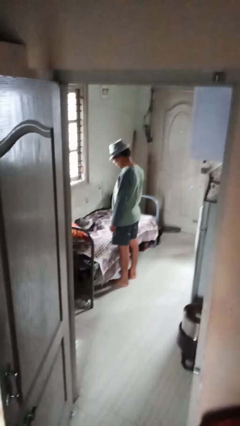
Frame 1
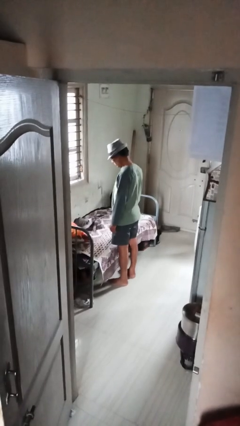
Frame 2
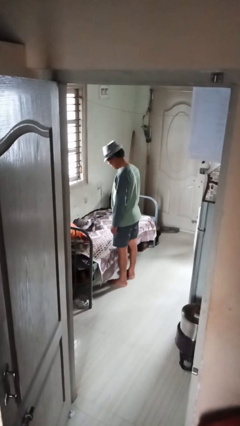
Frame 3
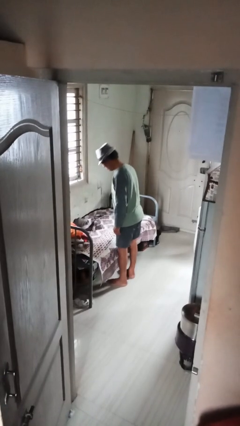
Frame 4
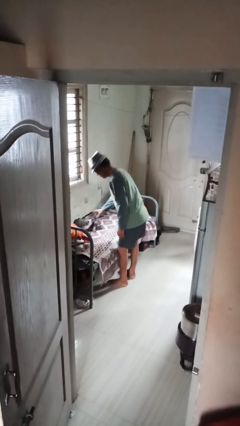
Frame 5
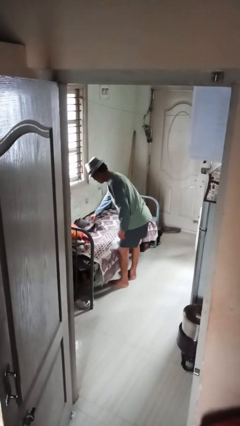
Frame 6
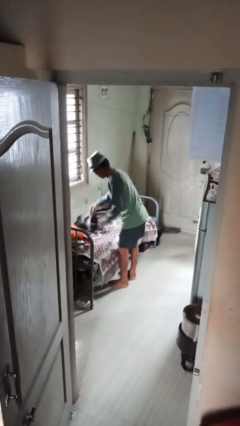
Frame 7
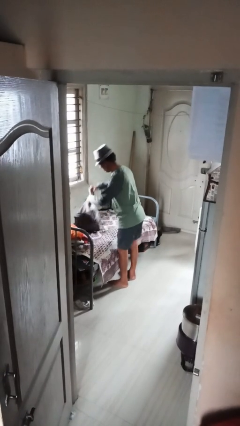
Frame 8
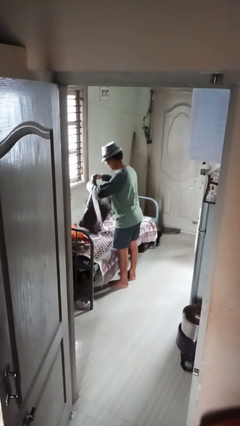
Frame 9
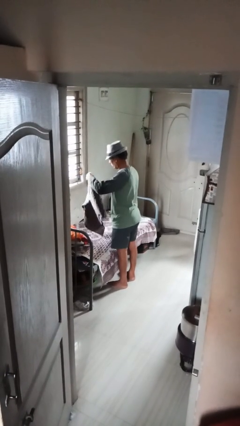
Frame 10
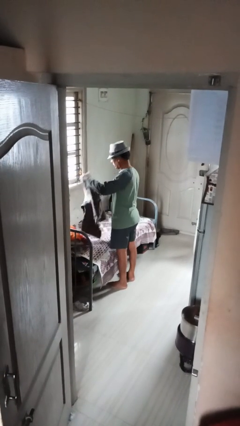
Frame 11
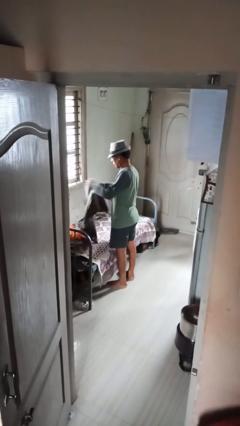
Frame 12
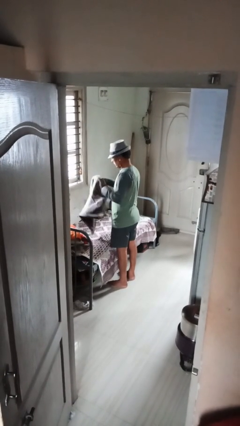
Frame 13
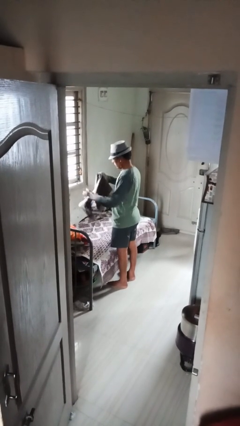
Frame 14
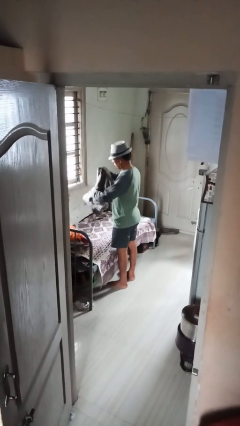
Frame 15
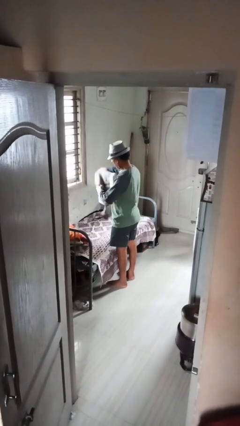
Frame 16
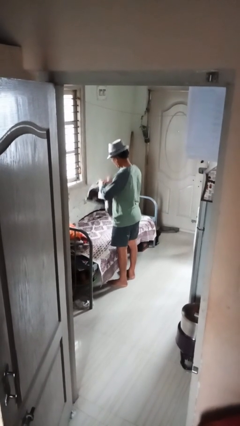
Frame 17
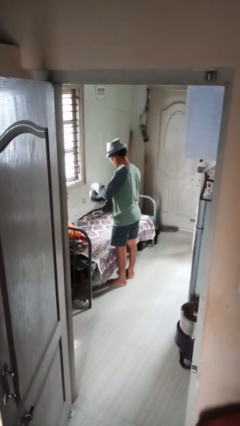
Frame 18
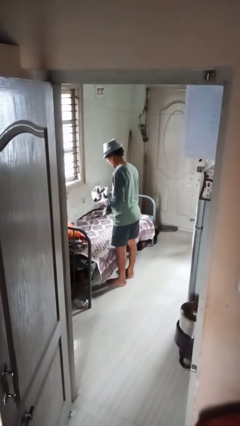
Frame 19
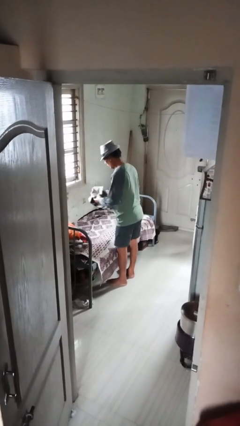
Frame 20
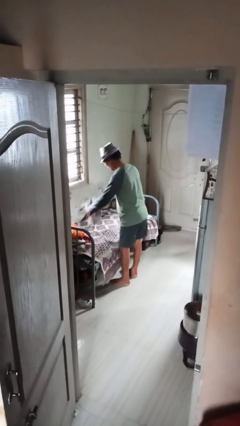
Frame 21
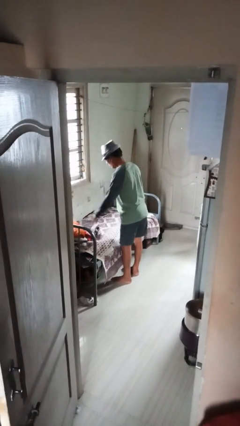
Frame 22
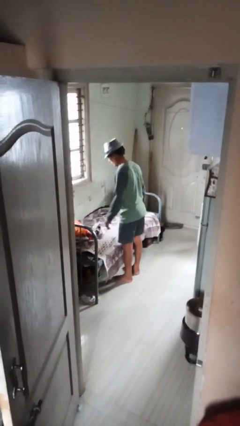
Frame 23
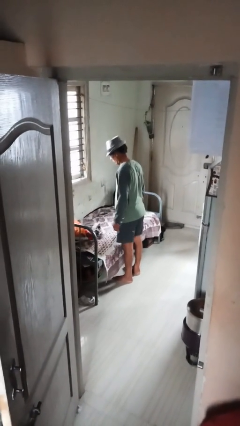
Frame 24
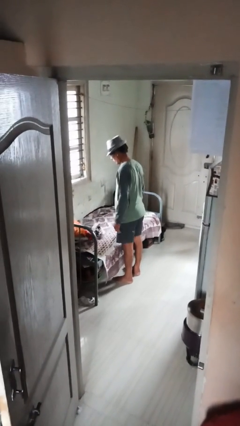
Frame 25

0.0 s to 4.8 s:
person folds pants

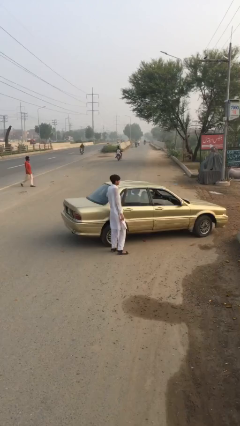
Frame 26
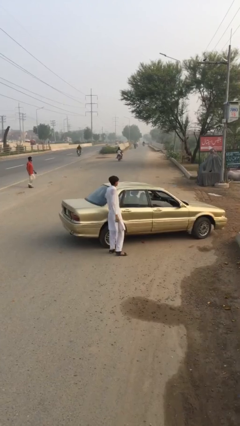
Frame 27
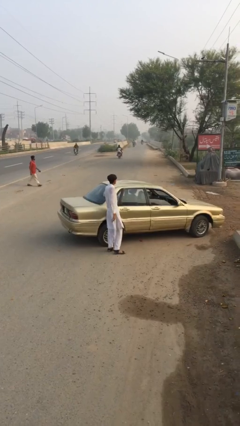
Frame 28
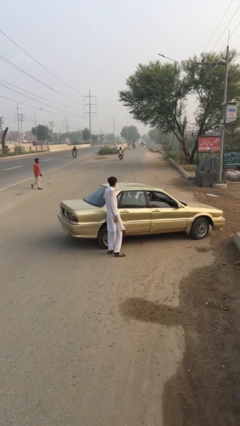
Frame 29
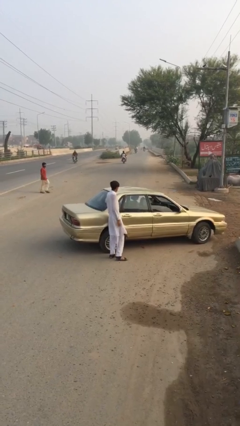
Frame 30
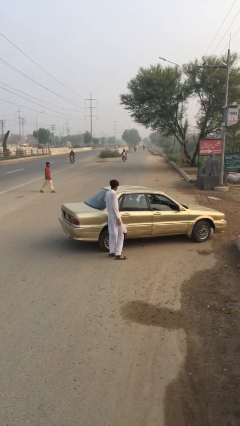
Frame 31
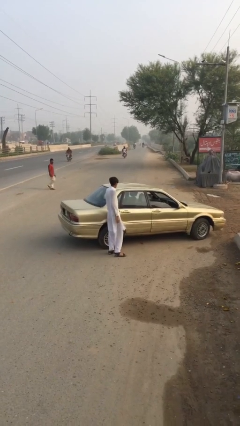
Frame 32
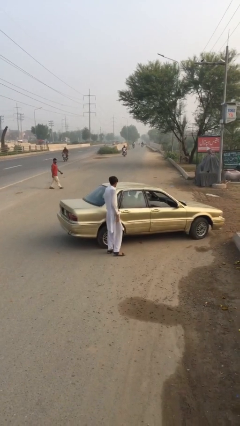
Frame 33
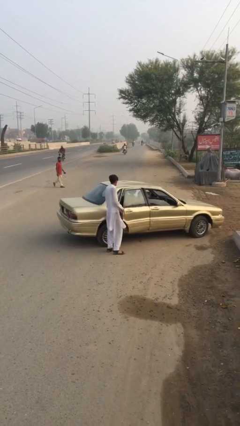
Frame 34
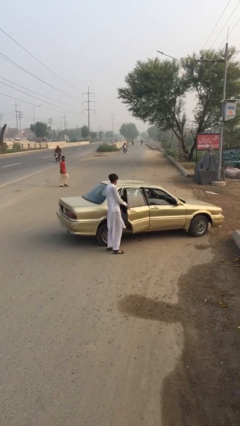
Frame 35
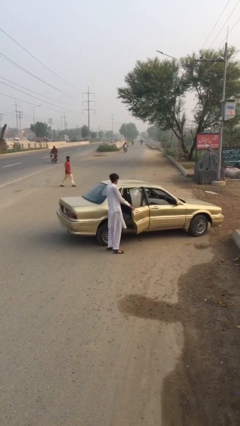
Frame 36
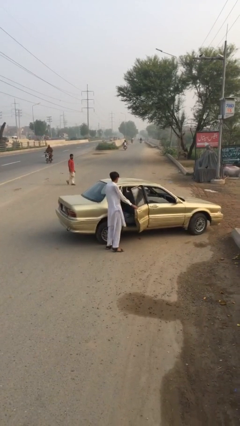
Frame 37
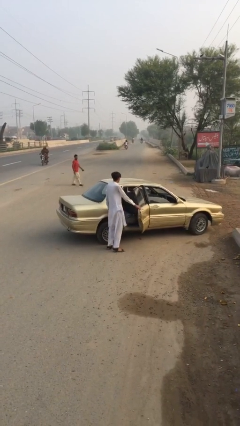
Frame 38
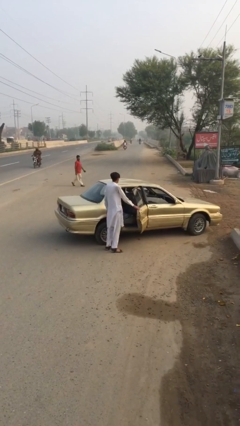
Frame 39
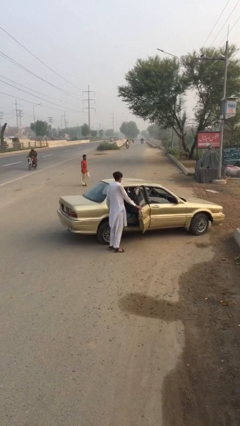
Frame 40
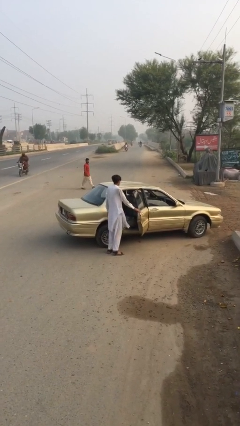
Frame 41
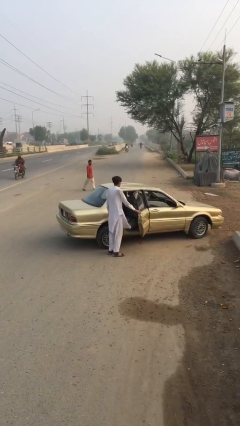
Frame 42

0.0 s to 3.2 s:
person opens car door

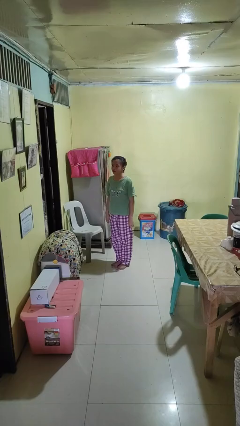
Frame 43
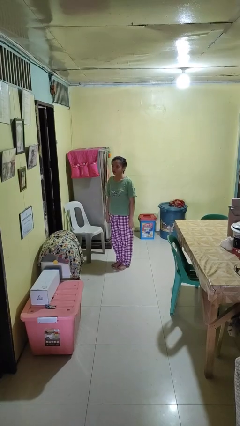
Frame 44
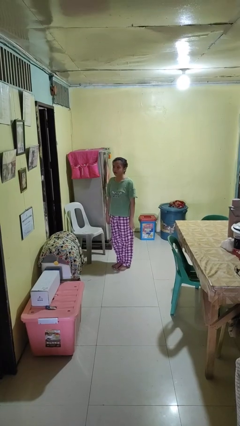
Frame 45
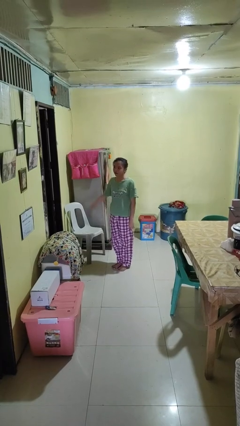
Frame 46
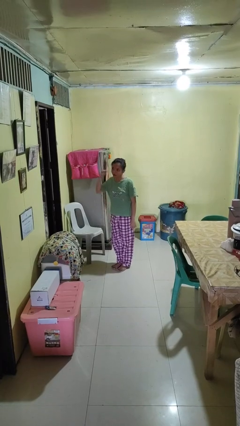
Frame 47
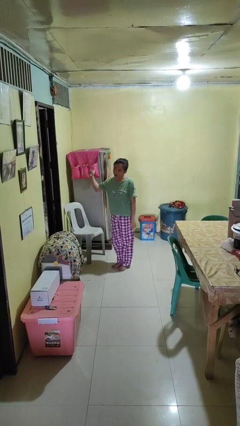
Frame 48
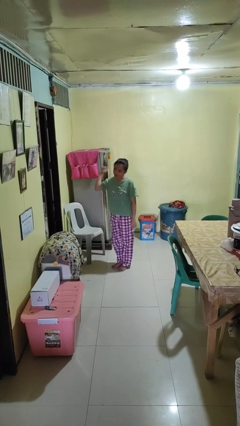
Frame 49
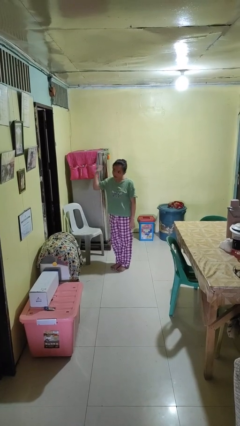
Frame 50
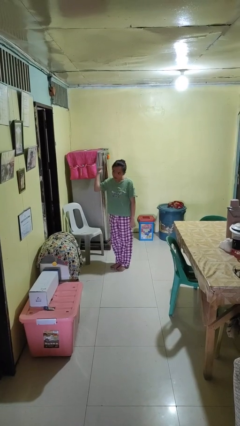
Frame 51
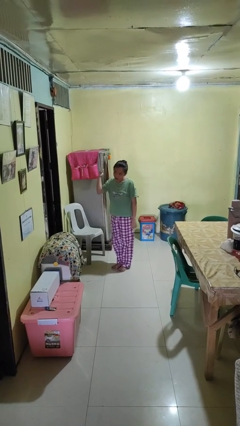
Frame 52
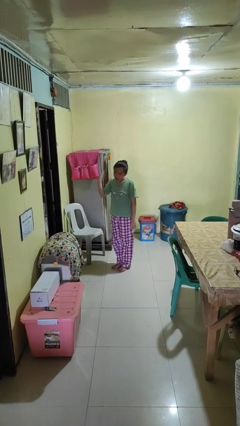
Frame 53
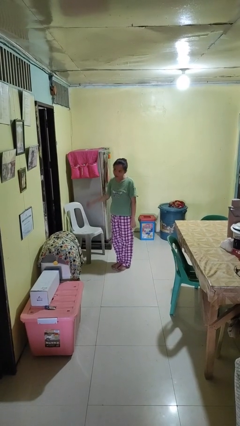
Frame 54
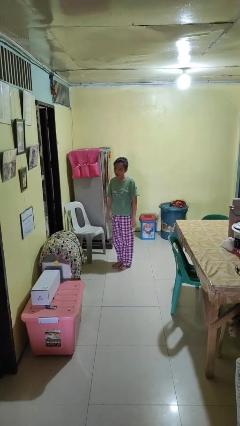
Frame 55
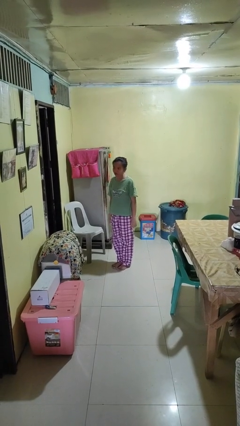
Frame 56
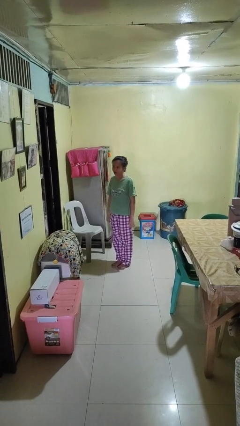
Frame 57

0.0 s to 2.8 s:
person gestures behind me

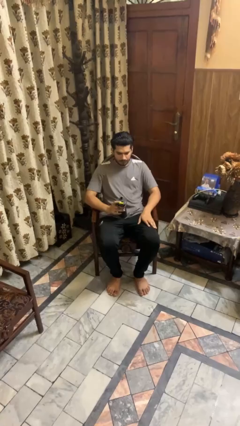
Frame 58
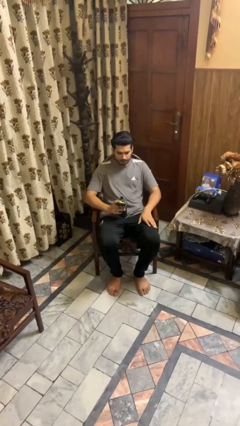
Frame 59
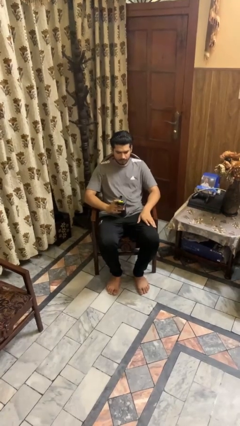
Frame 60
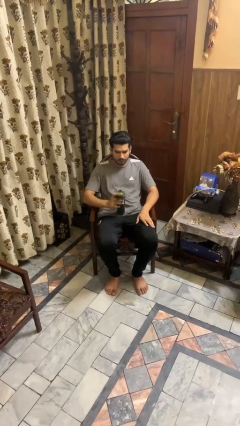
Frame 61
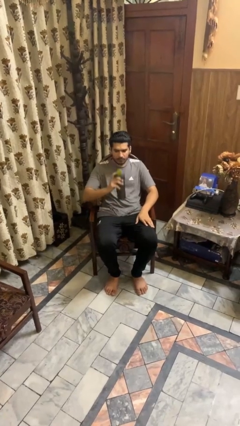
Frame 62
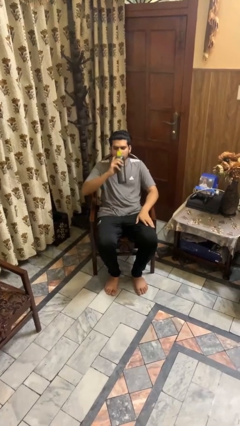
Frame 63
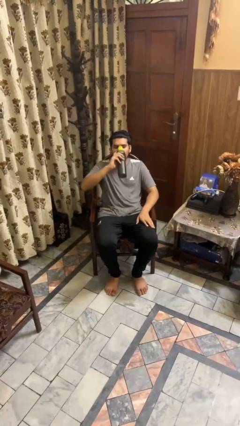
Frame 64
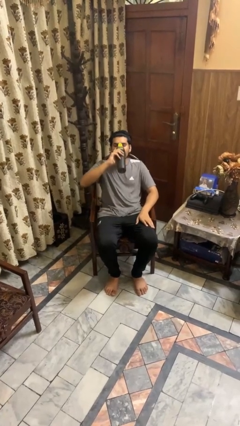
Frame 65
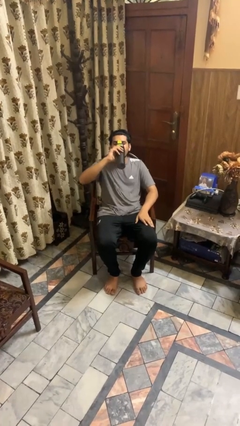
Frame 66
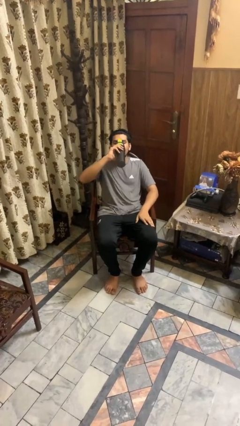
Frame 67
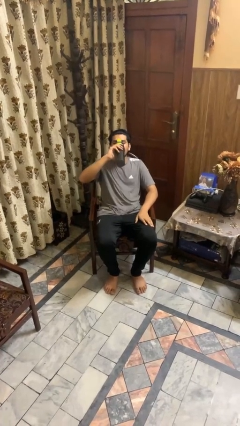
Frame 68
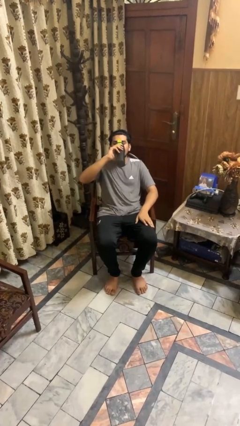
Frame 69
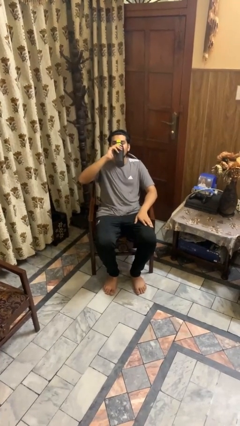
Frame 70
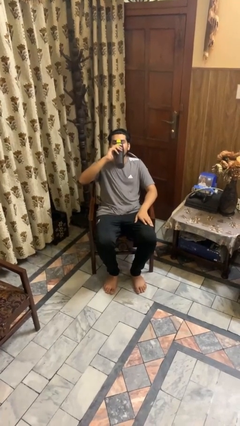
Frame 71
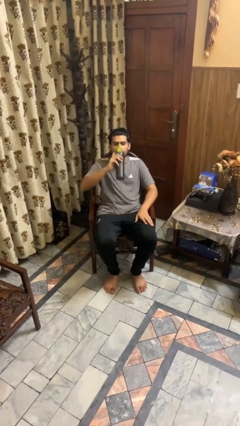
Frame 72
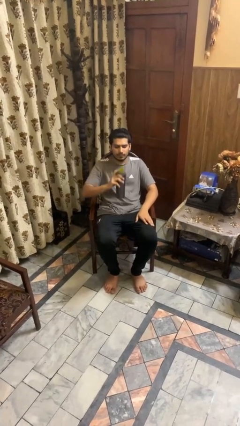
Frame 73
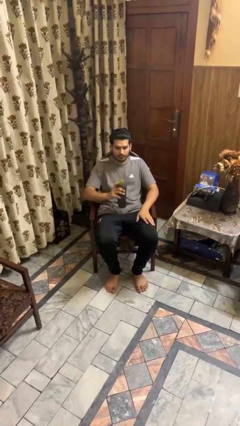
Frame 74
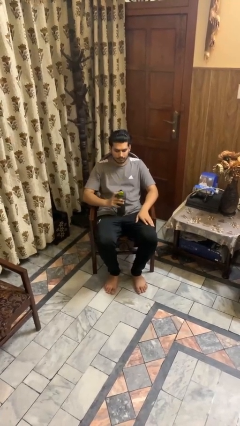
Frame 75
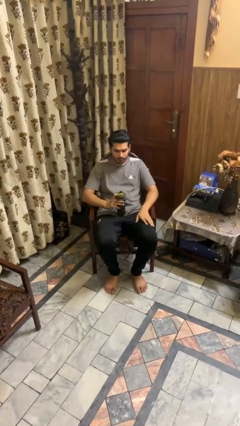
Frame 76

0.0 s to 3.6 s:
person drinks from bottle

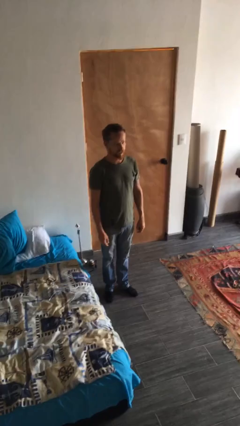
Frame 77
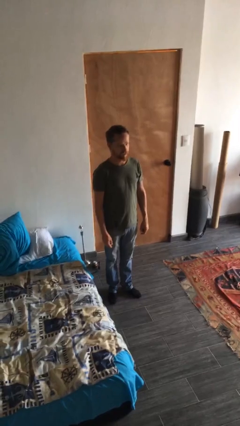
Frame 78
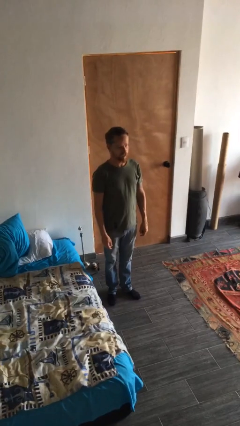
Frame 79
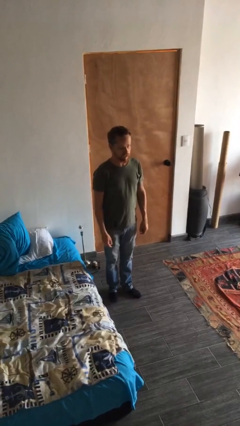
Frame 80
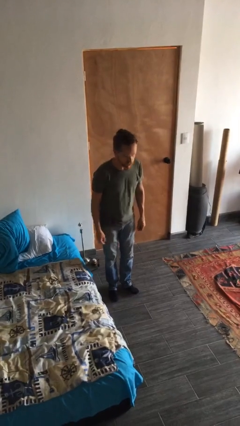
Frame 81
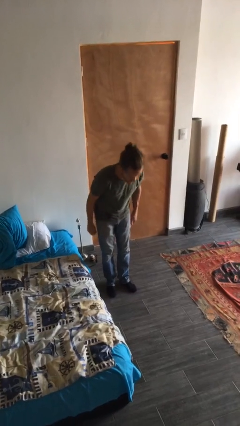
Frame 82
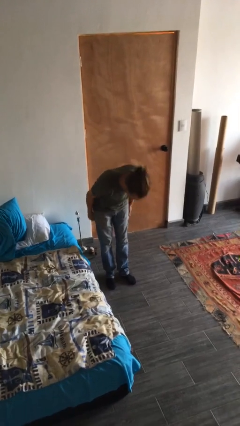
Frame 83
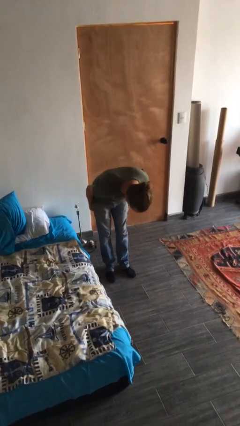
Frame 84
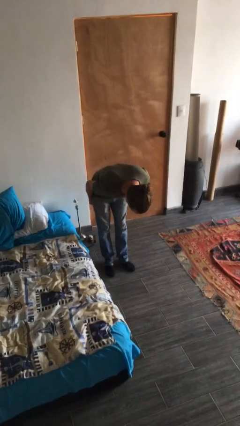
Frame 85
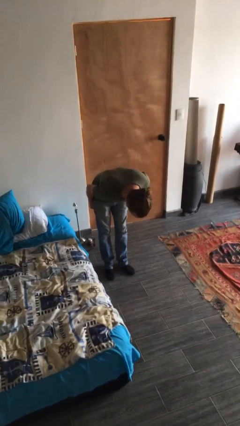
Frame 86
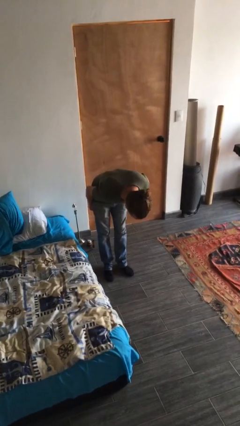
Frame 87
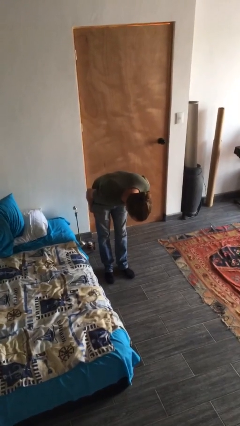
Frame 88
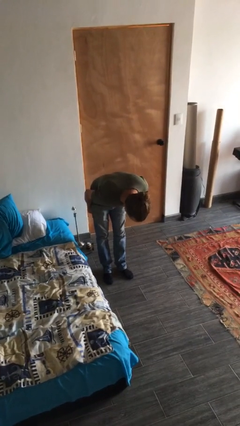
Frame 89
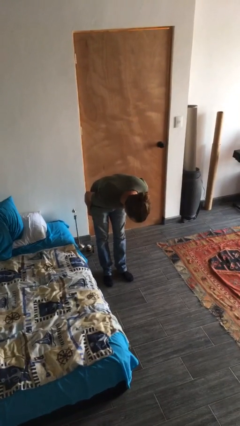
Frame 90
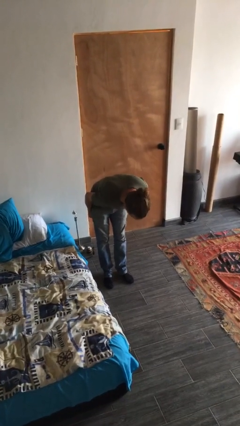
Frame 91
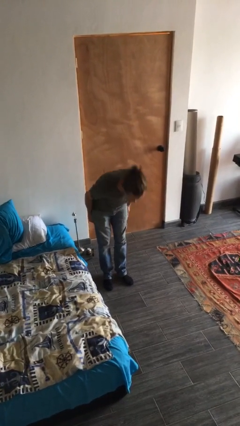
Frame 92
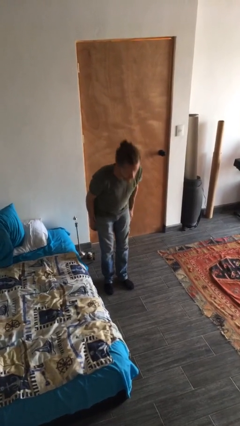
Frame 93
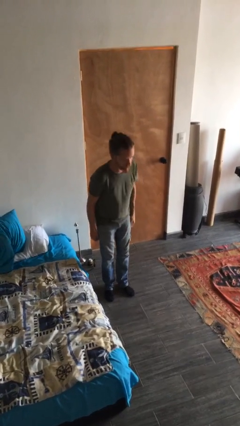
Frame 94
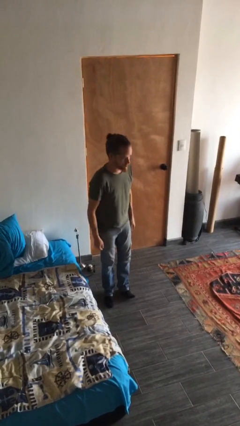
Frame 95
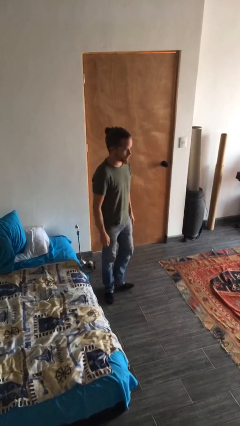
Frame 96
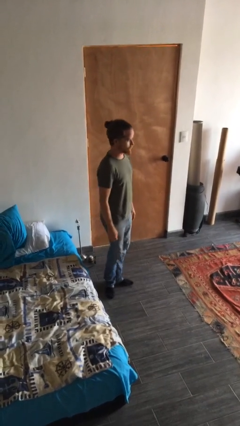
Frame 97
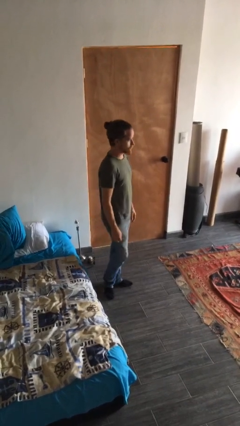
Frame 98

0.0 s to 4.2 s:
person bows
